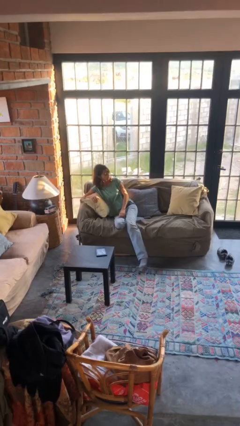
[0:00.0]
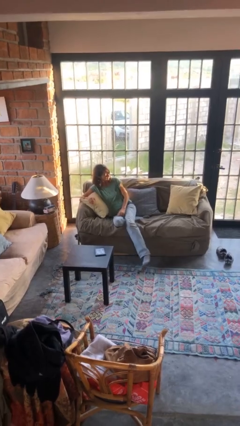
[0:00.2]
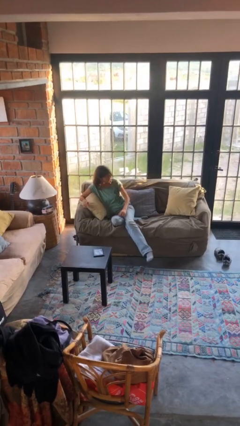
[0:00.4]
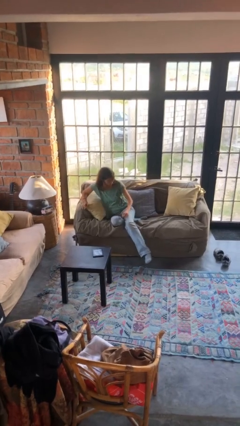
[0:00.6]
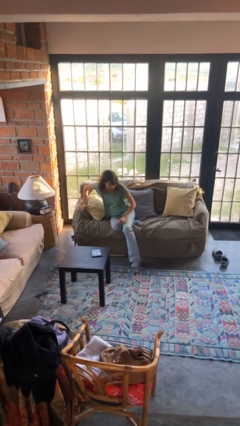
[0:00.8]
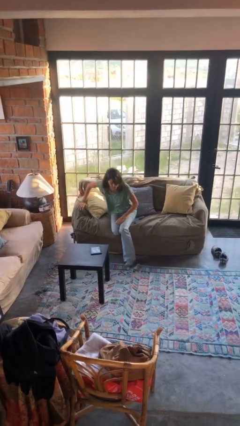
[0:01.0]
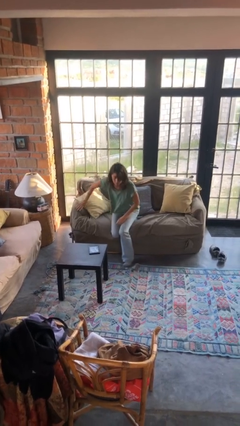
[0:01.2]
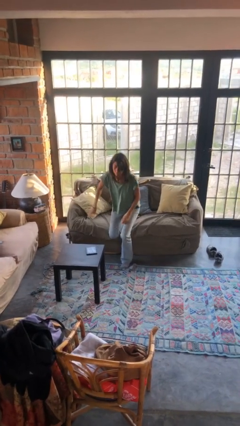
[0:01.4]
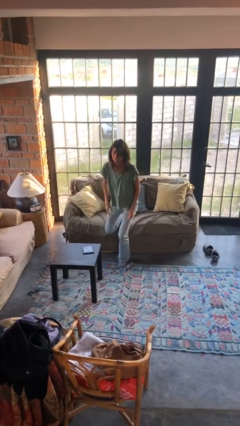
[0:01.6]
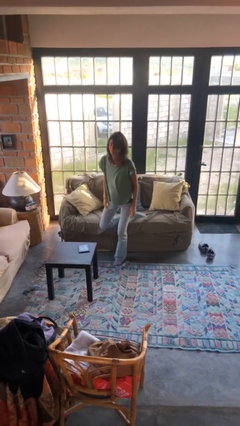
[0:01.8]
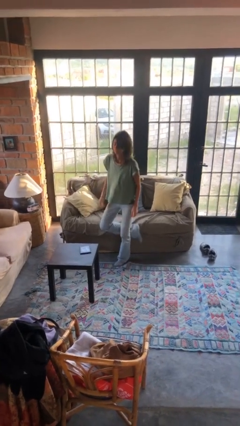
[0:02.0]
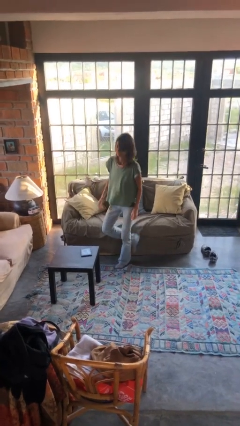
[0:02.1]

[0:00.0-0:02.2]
person stands up

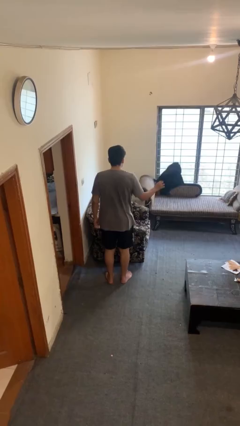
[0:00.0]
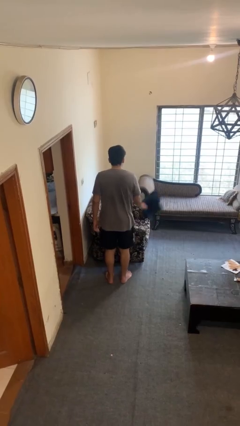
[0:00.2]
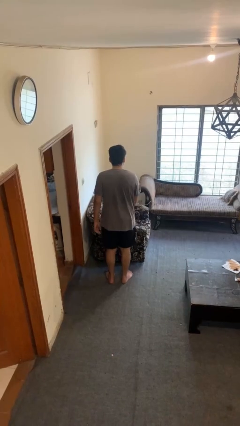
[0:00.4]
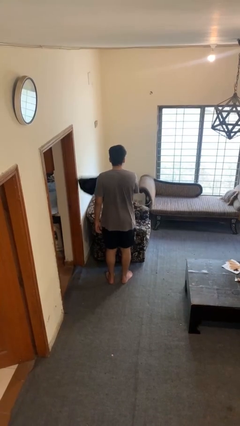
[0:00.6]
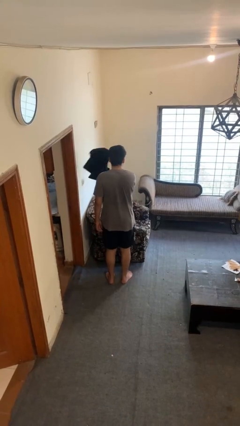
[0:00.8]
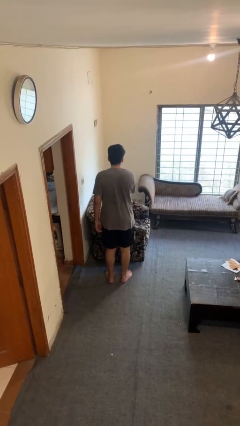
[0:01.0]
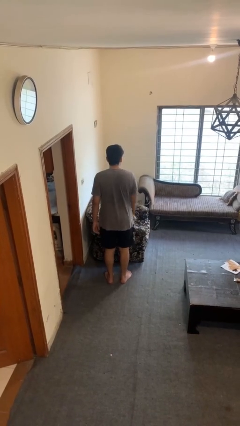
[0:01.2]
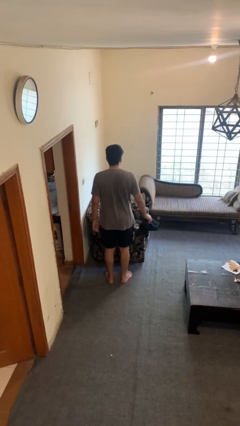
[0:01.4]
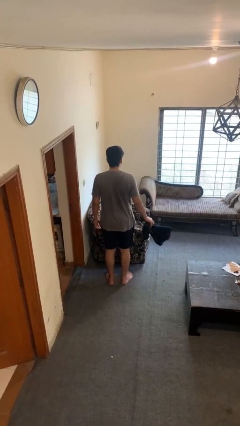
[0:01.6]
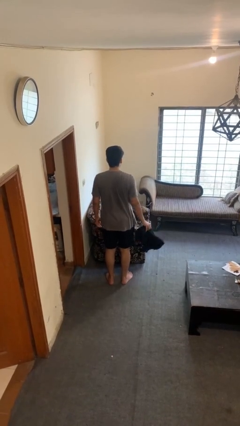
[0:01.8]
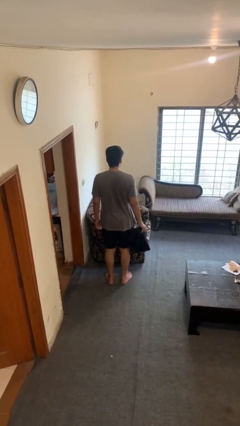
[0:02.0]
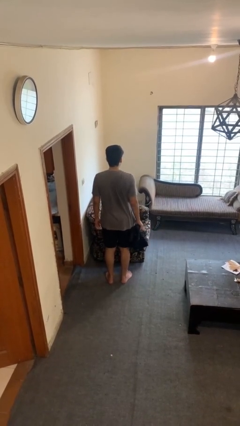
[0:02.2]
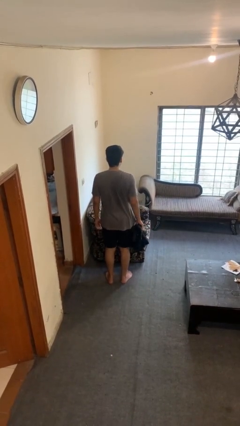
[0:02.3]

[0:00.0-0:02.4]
person dusts furniture

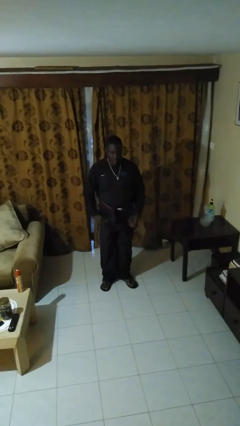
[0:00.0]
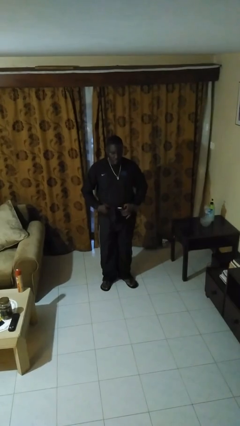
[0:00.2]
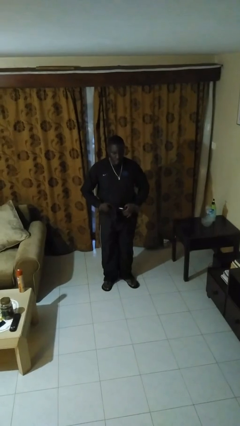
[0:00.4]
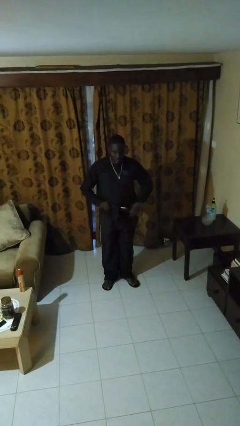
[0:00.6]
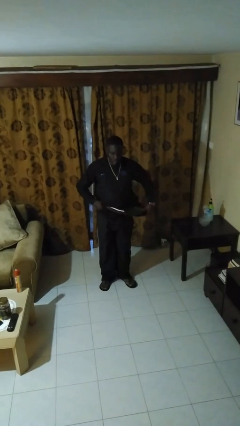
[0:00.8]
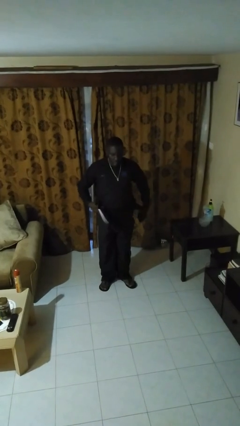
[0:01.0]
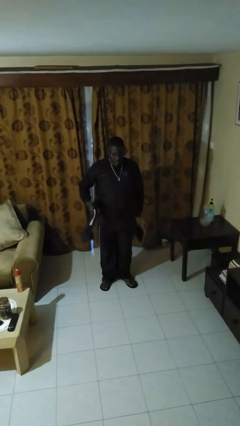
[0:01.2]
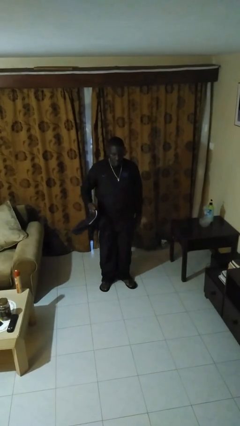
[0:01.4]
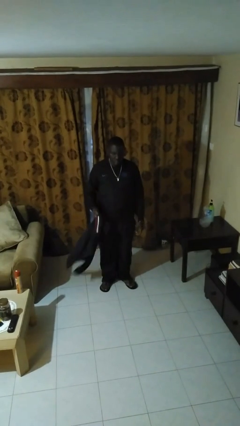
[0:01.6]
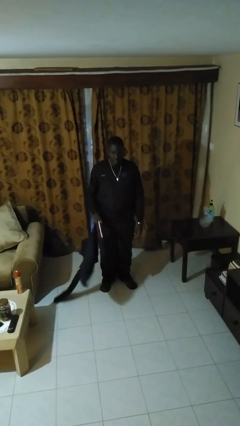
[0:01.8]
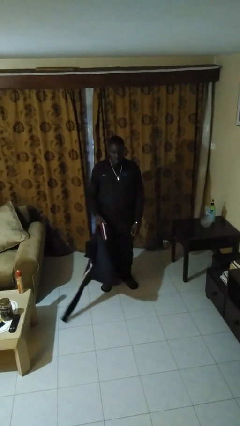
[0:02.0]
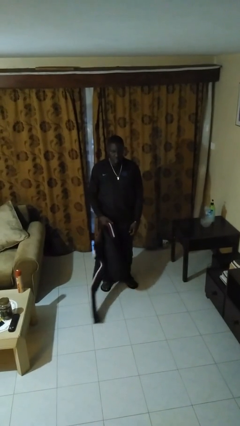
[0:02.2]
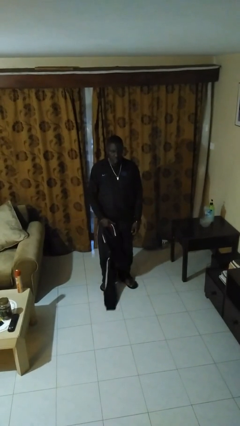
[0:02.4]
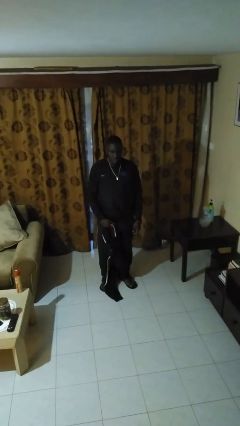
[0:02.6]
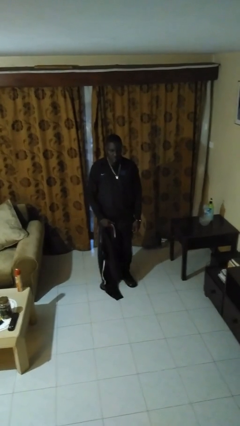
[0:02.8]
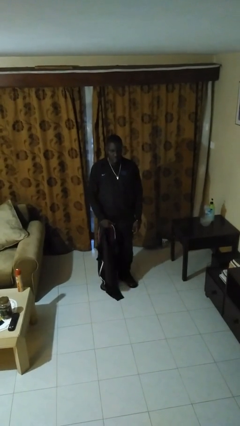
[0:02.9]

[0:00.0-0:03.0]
person unties jacket around waist

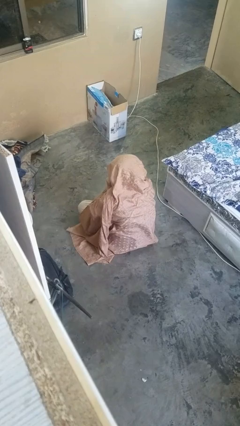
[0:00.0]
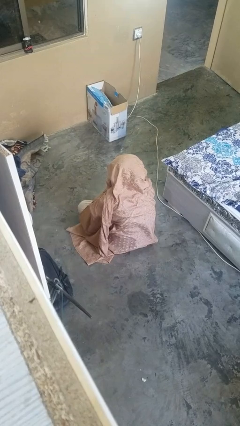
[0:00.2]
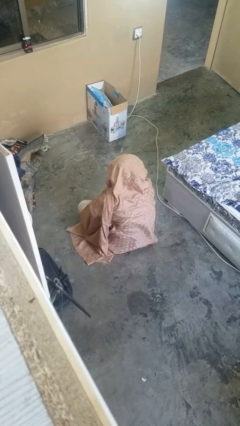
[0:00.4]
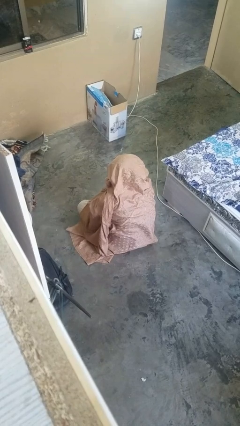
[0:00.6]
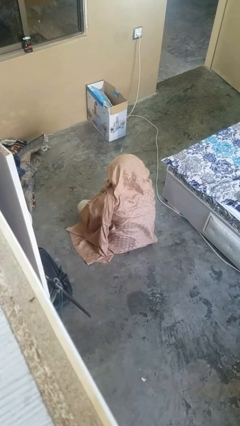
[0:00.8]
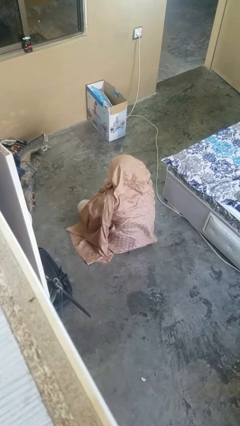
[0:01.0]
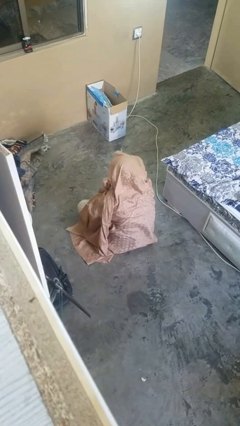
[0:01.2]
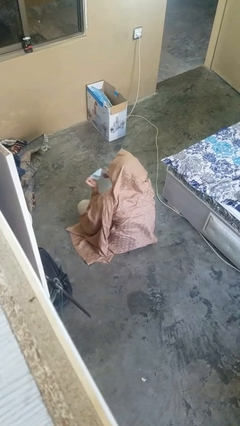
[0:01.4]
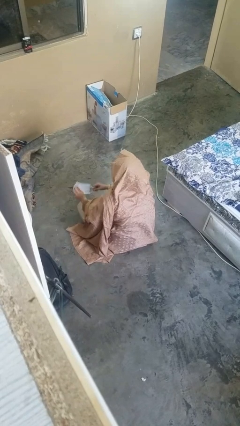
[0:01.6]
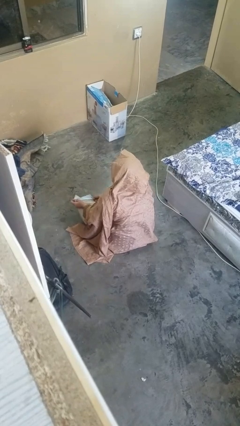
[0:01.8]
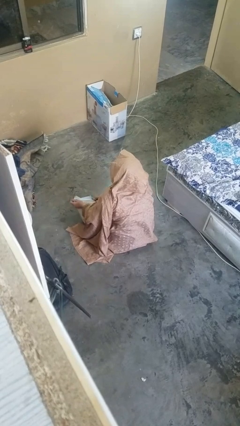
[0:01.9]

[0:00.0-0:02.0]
person takes off facemask

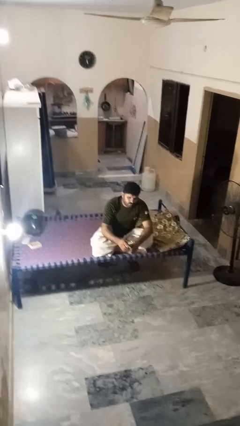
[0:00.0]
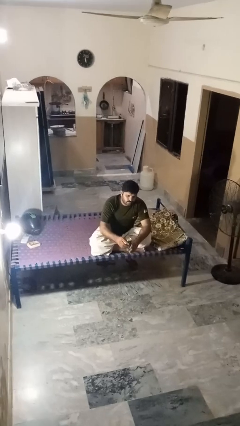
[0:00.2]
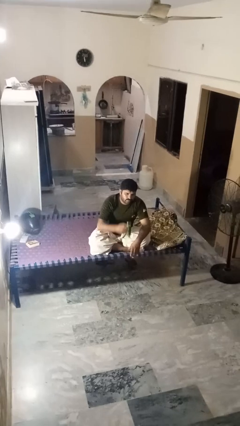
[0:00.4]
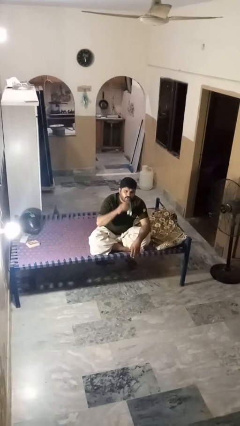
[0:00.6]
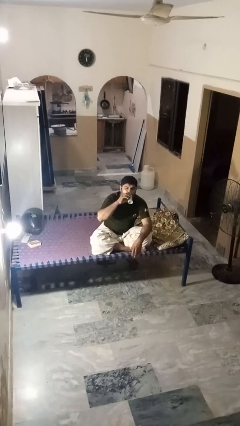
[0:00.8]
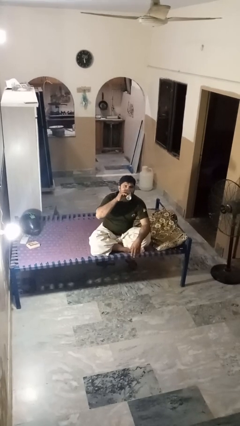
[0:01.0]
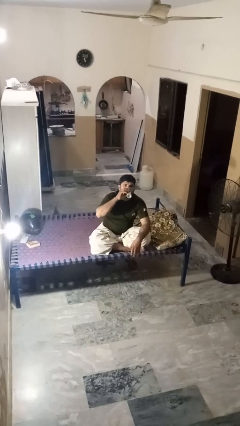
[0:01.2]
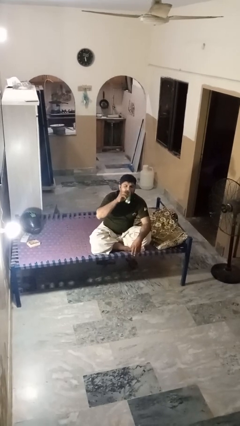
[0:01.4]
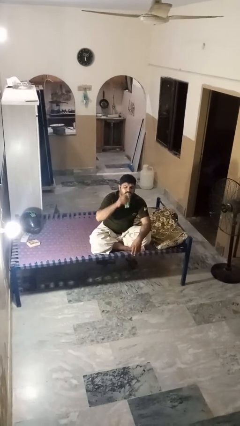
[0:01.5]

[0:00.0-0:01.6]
person drinks from beverage can

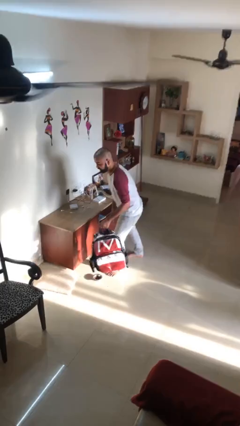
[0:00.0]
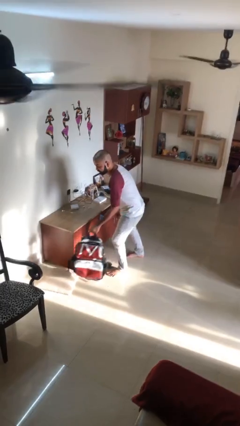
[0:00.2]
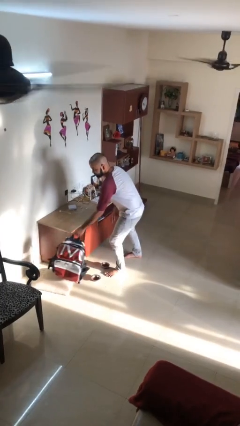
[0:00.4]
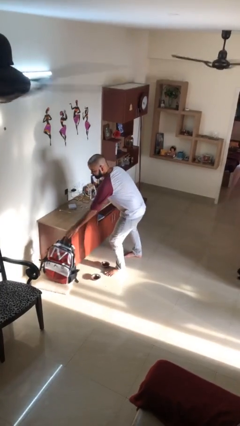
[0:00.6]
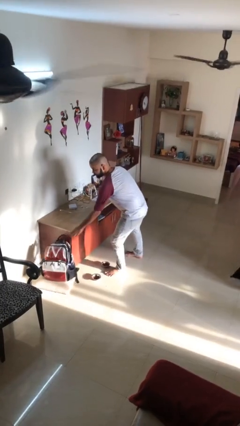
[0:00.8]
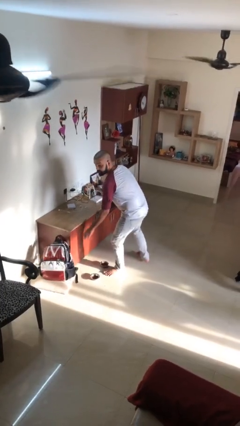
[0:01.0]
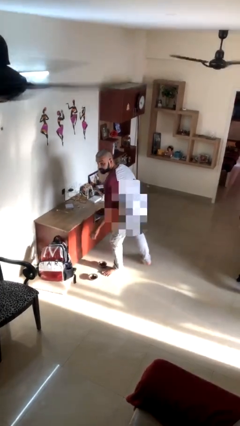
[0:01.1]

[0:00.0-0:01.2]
person puts down object on floor

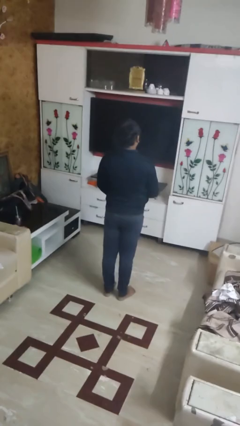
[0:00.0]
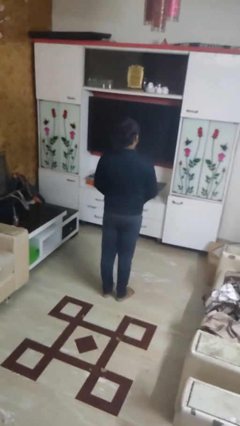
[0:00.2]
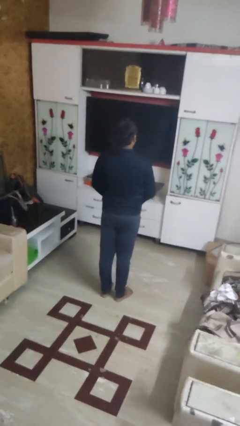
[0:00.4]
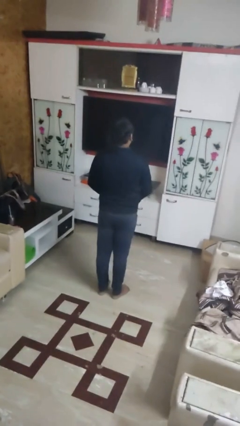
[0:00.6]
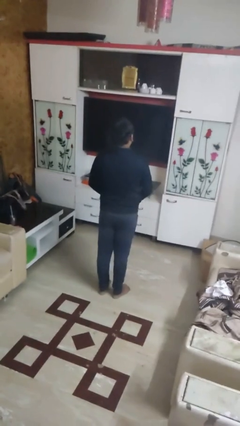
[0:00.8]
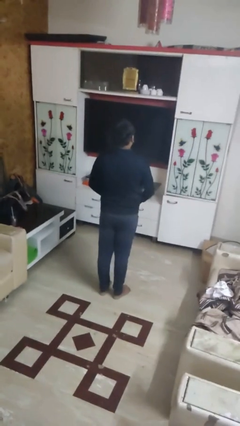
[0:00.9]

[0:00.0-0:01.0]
person unzips jacket

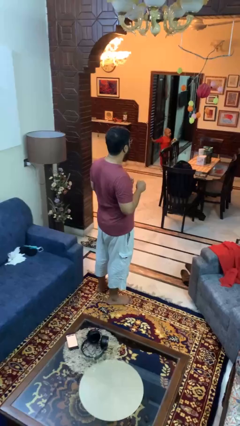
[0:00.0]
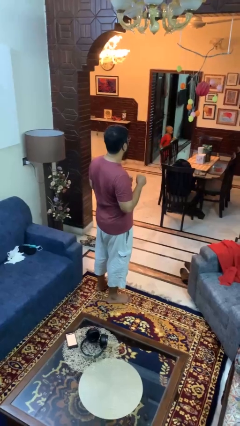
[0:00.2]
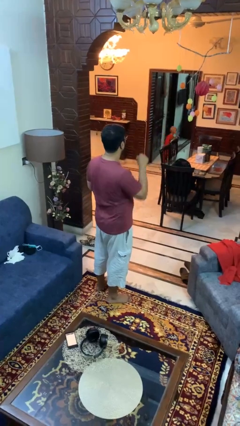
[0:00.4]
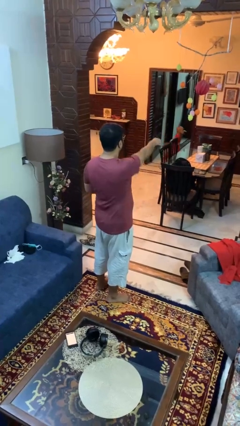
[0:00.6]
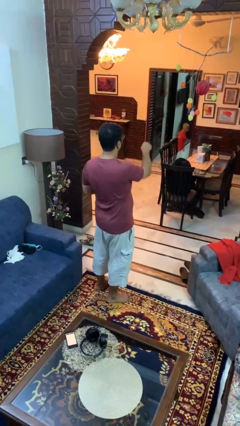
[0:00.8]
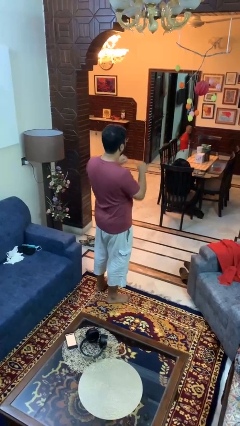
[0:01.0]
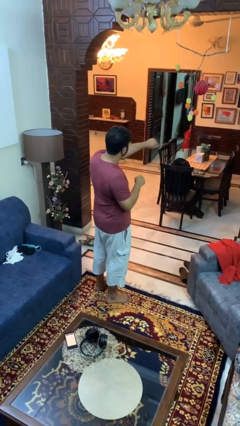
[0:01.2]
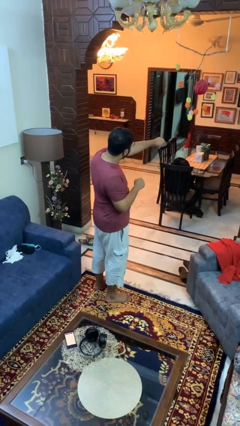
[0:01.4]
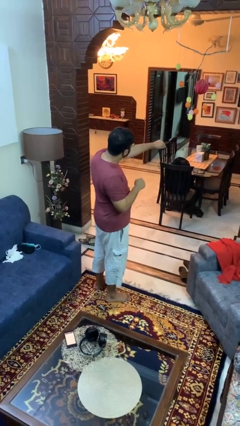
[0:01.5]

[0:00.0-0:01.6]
person punches

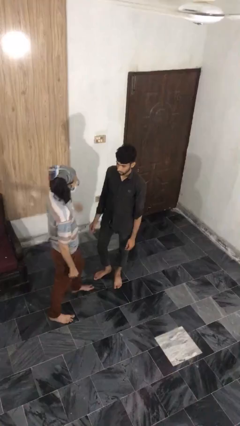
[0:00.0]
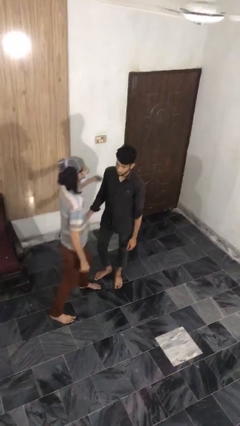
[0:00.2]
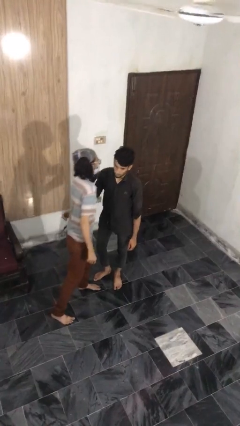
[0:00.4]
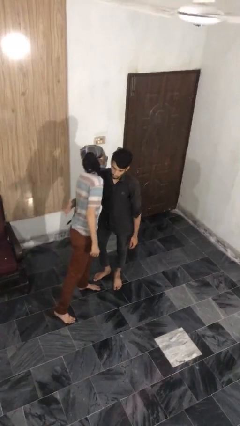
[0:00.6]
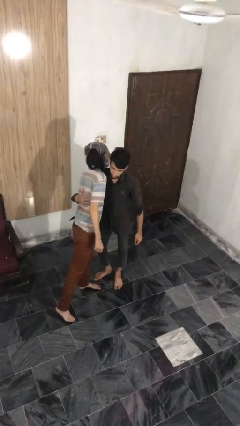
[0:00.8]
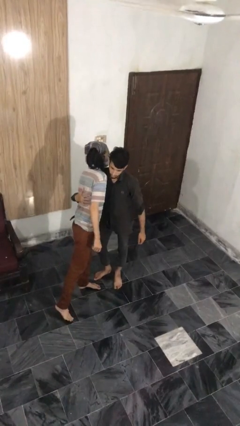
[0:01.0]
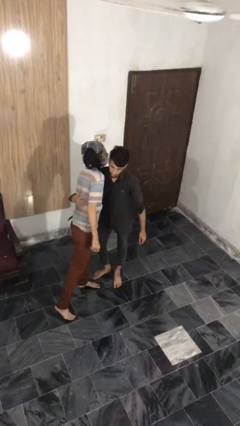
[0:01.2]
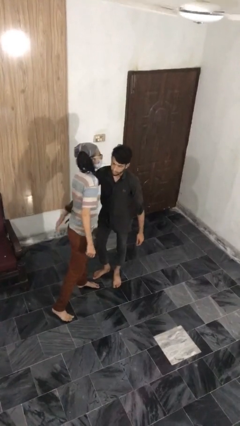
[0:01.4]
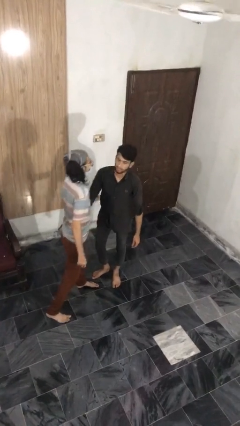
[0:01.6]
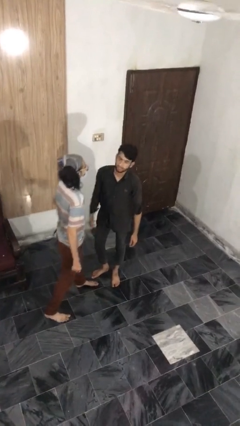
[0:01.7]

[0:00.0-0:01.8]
person embraces person
